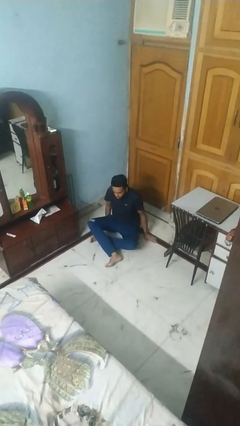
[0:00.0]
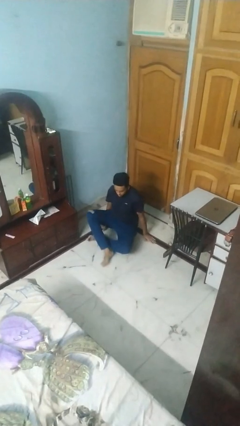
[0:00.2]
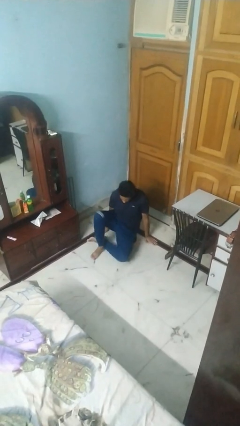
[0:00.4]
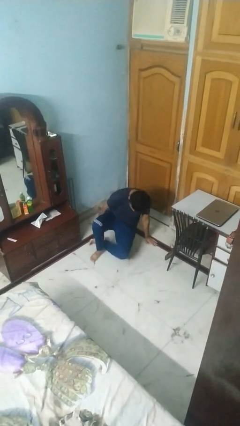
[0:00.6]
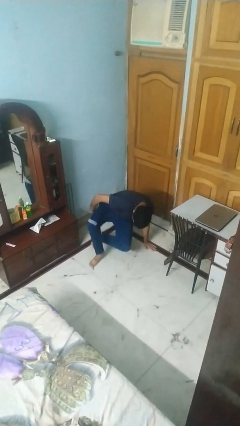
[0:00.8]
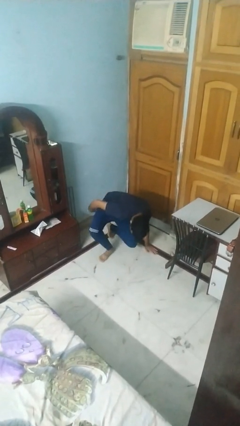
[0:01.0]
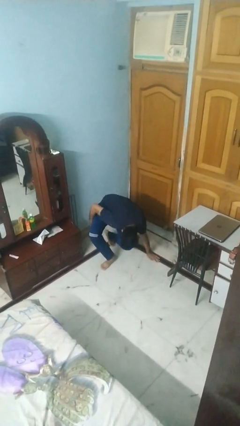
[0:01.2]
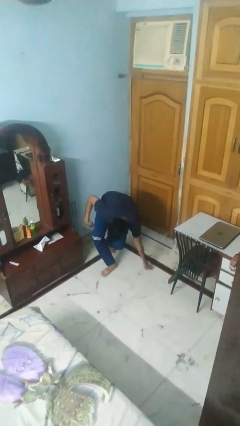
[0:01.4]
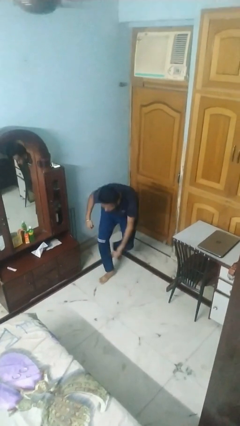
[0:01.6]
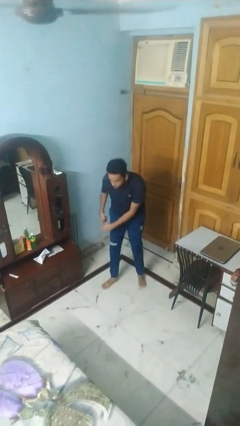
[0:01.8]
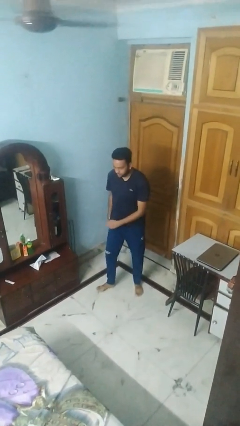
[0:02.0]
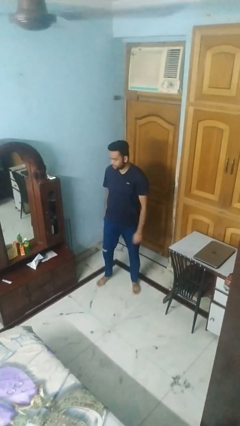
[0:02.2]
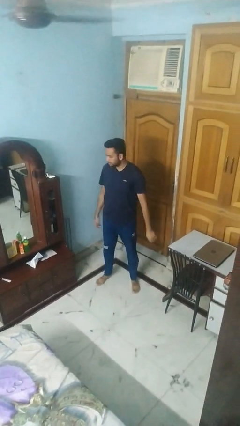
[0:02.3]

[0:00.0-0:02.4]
person stands up from floor

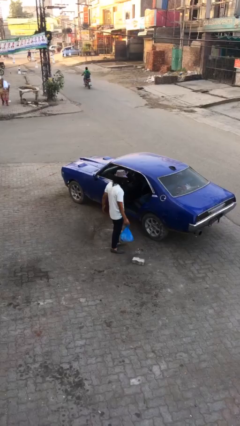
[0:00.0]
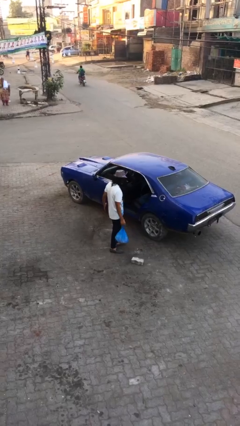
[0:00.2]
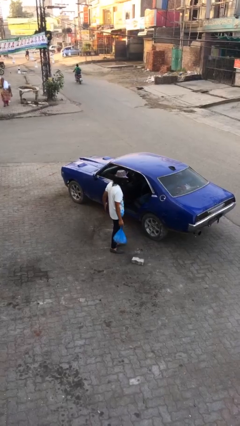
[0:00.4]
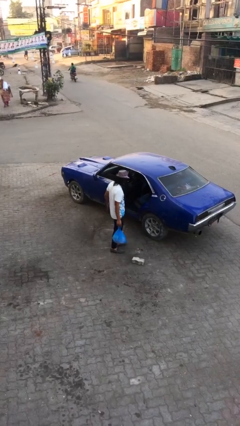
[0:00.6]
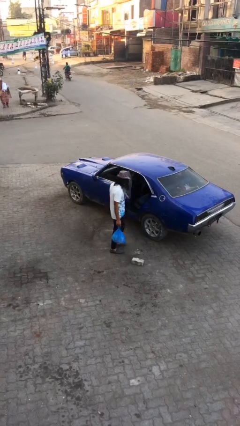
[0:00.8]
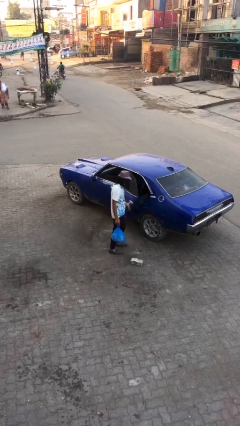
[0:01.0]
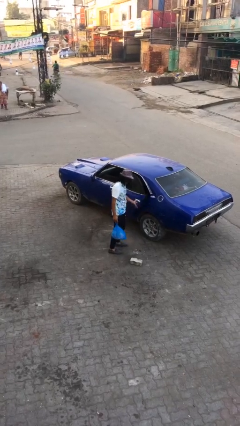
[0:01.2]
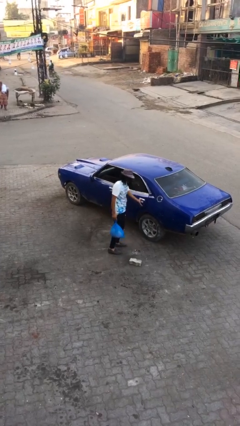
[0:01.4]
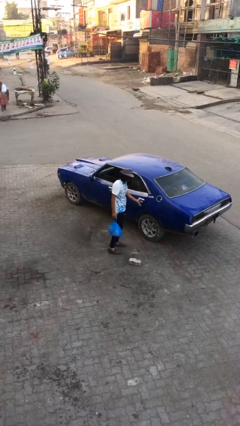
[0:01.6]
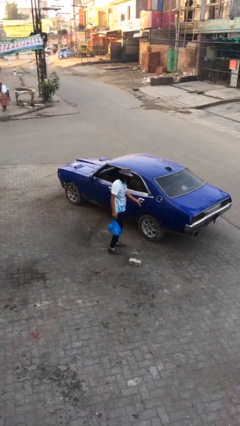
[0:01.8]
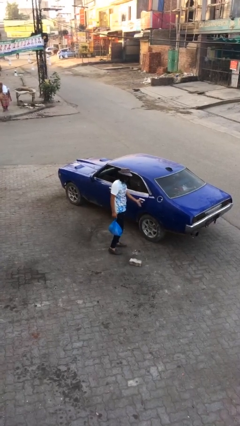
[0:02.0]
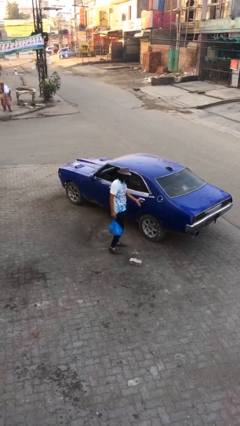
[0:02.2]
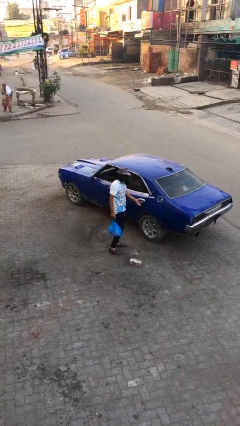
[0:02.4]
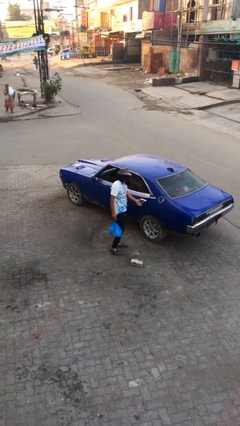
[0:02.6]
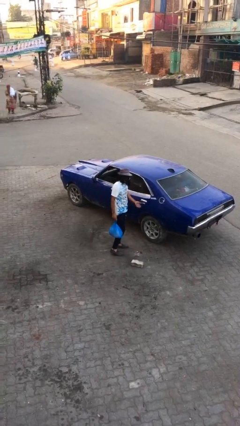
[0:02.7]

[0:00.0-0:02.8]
person closes car door

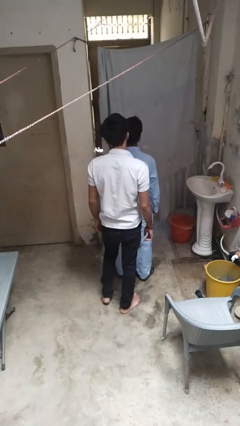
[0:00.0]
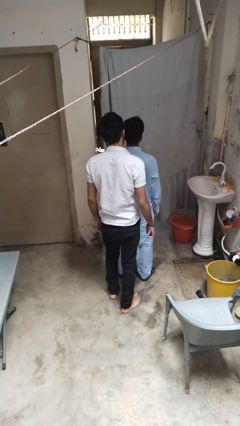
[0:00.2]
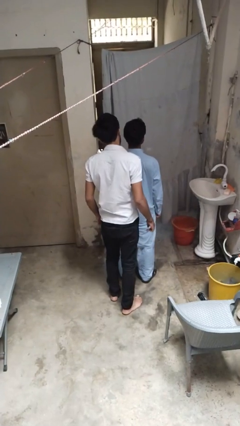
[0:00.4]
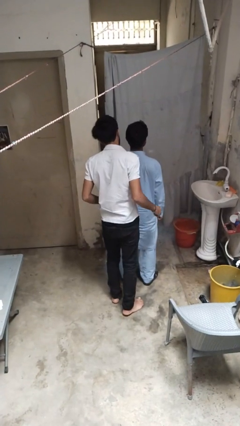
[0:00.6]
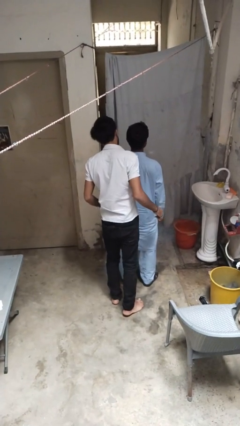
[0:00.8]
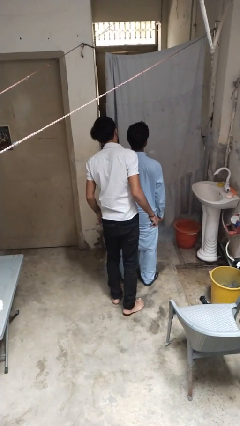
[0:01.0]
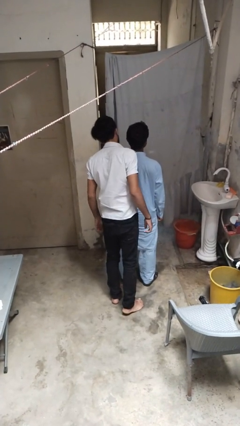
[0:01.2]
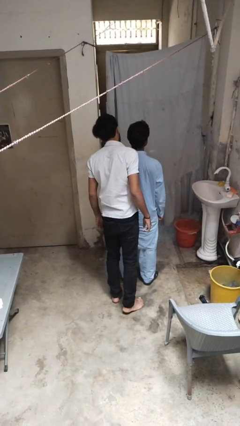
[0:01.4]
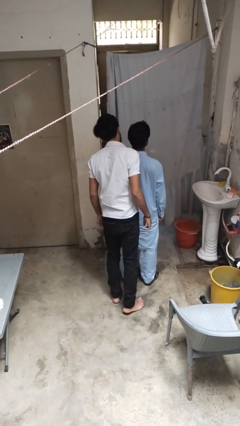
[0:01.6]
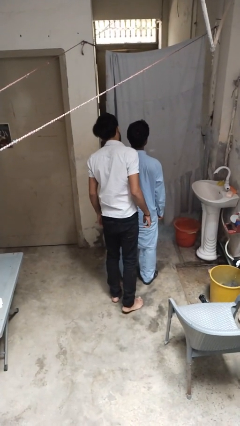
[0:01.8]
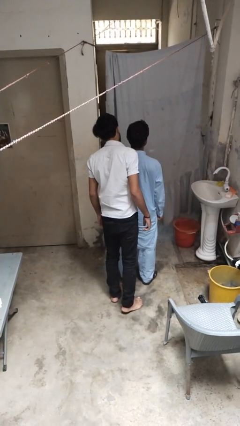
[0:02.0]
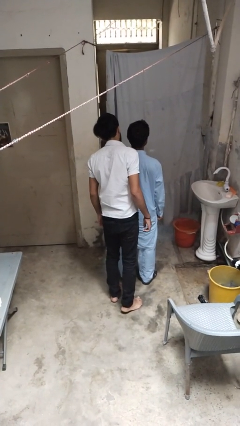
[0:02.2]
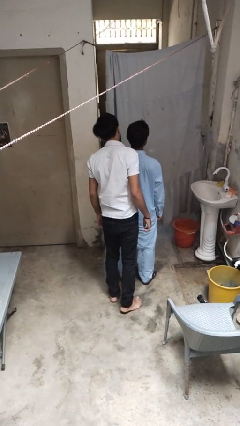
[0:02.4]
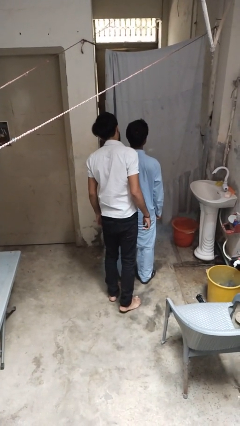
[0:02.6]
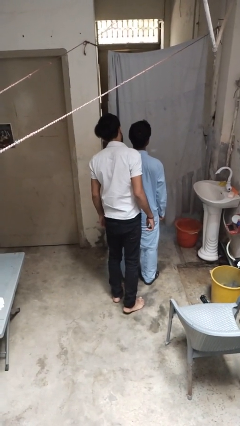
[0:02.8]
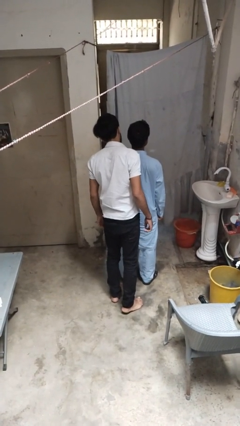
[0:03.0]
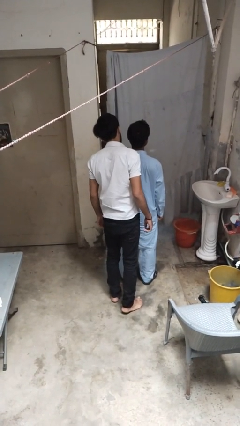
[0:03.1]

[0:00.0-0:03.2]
person looks over shoulder

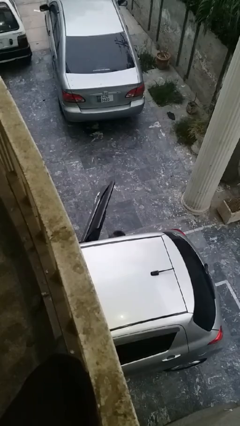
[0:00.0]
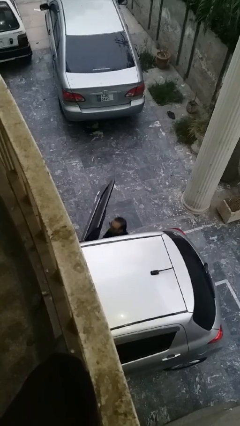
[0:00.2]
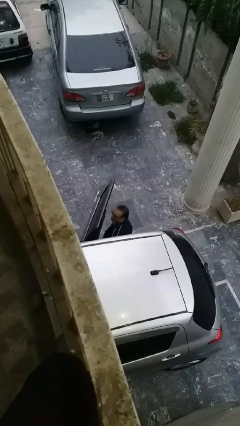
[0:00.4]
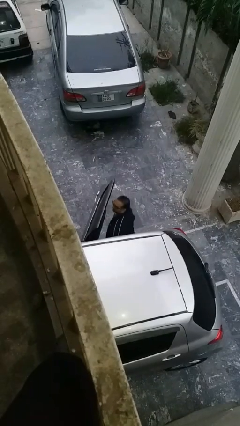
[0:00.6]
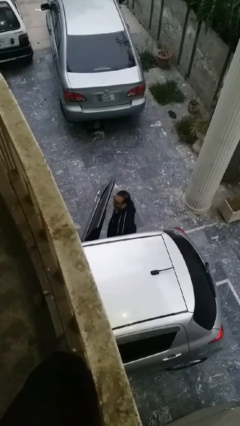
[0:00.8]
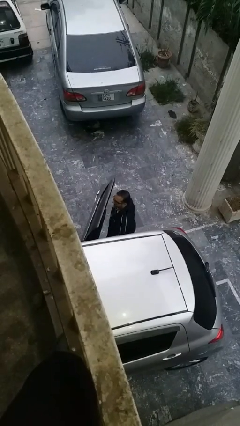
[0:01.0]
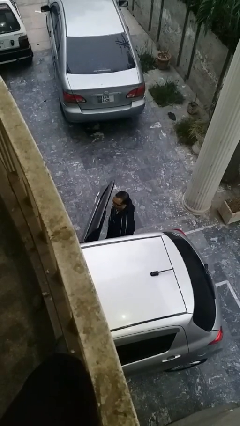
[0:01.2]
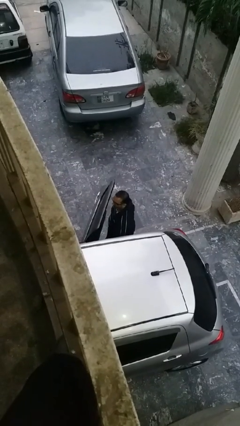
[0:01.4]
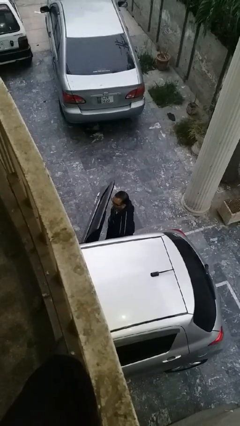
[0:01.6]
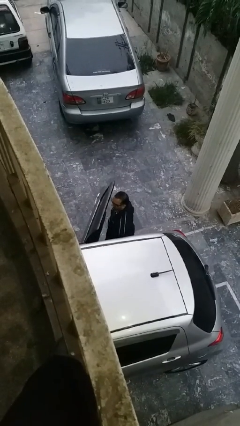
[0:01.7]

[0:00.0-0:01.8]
person exits car

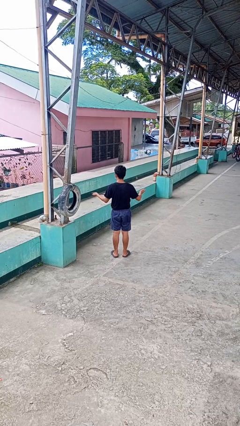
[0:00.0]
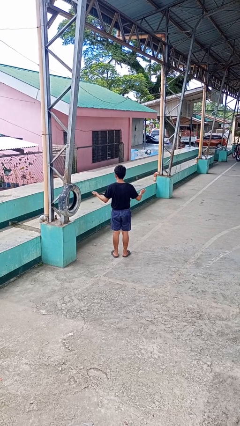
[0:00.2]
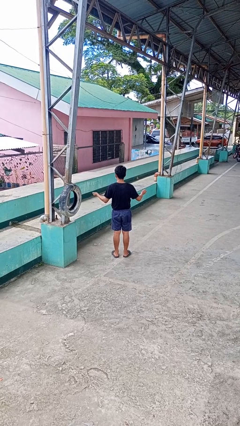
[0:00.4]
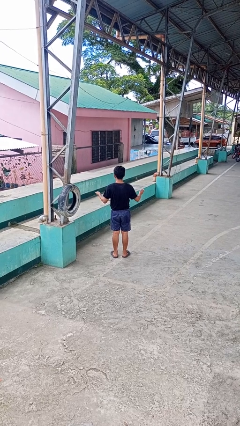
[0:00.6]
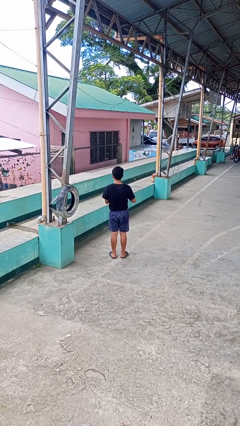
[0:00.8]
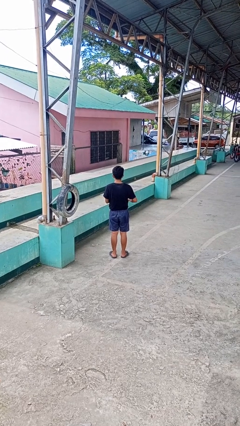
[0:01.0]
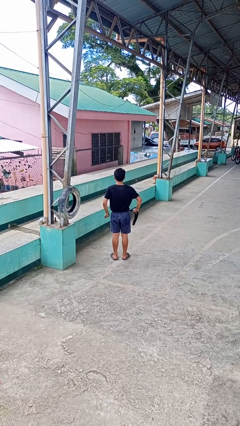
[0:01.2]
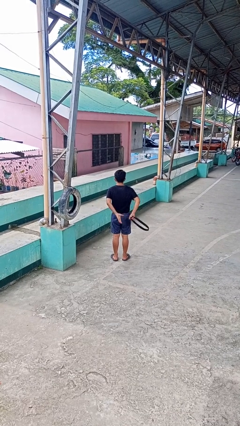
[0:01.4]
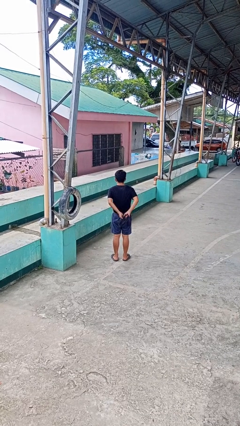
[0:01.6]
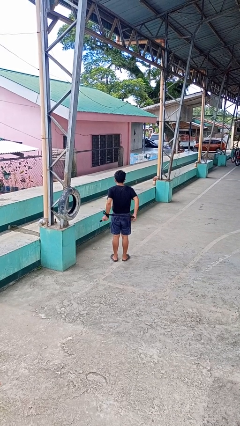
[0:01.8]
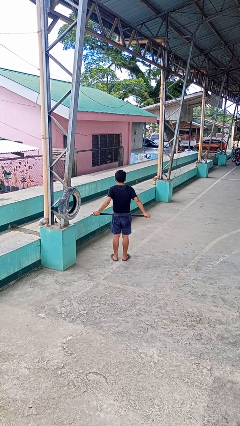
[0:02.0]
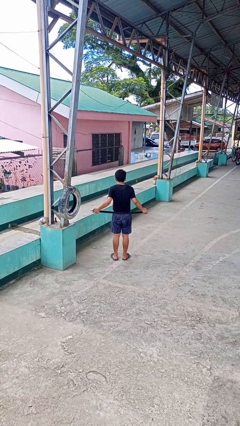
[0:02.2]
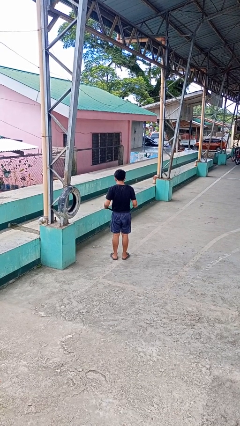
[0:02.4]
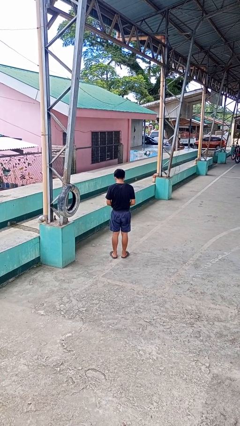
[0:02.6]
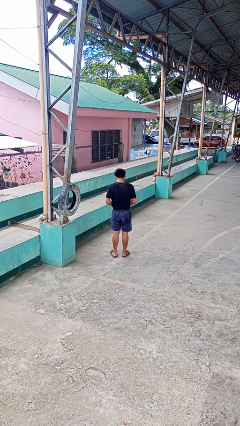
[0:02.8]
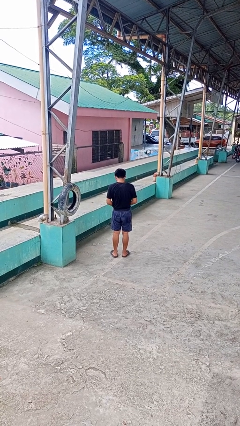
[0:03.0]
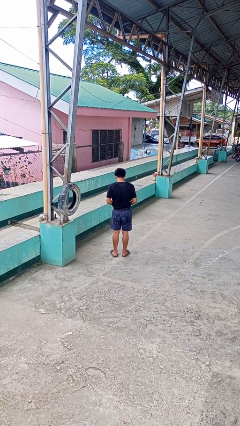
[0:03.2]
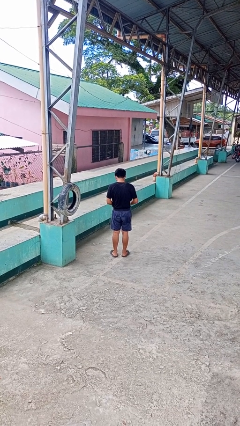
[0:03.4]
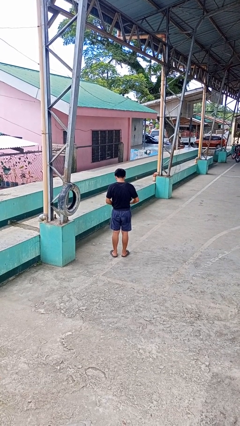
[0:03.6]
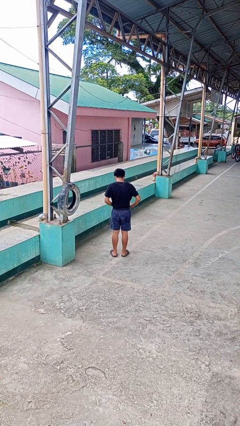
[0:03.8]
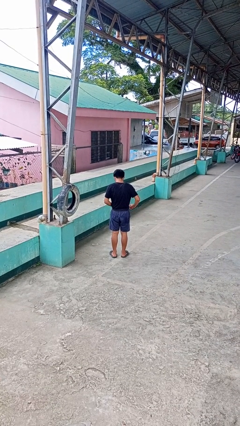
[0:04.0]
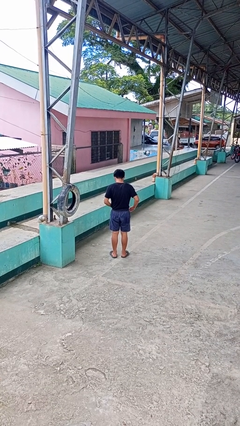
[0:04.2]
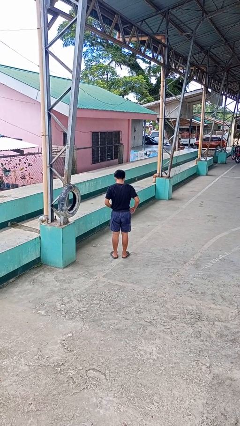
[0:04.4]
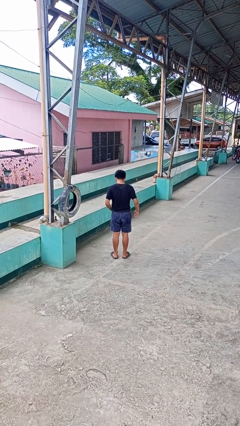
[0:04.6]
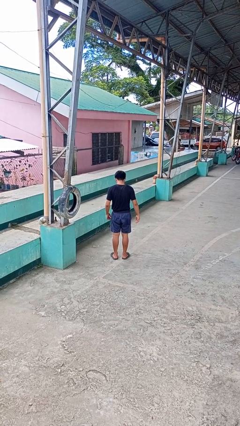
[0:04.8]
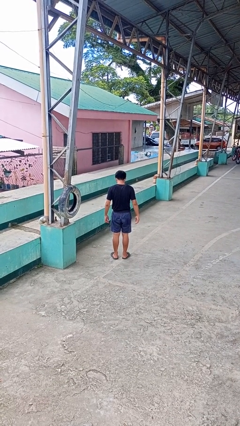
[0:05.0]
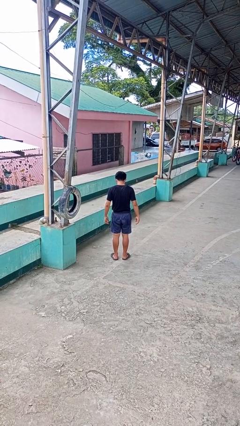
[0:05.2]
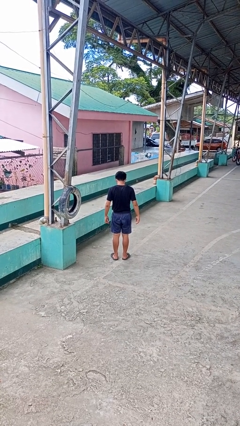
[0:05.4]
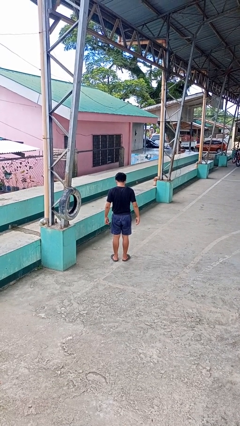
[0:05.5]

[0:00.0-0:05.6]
person puts on belt

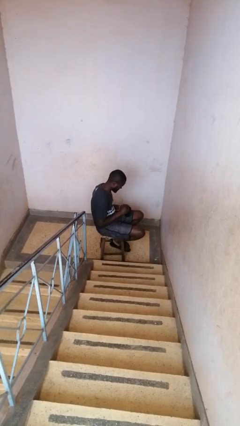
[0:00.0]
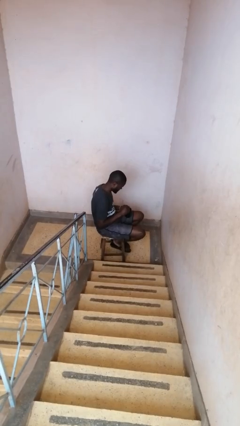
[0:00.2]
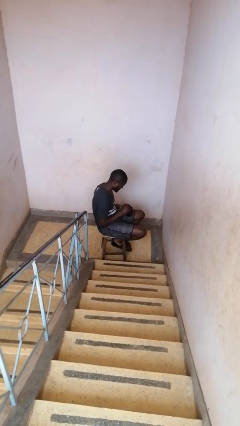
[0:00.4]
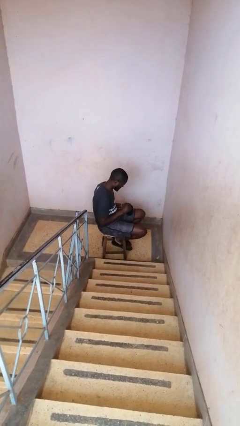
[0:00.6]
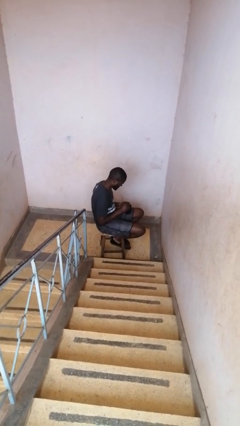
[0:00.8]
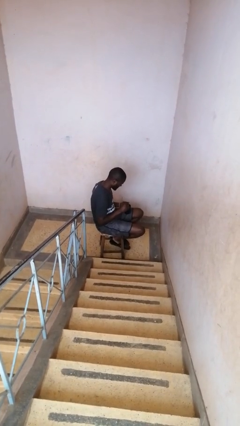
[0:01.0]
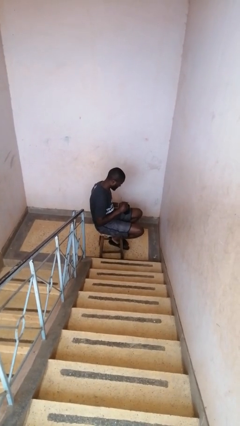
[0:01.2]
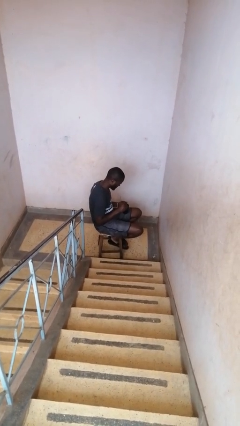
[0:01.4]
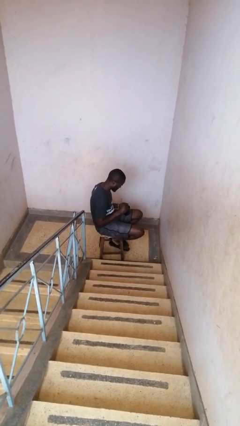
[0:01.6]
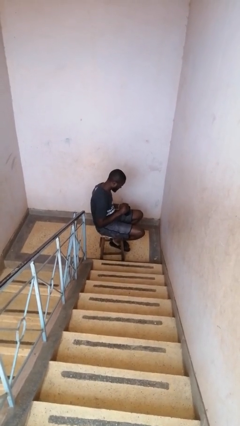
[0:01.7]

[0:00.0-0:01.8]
person drinks from mug
